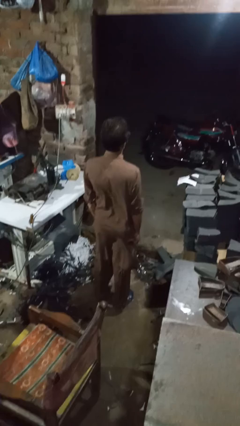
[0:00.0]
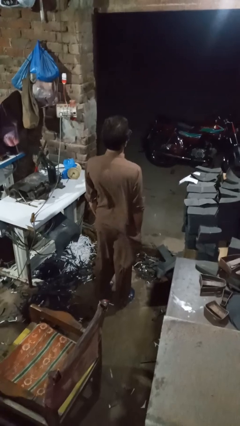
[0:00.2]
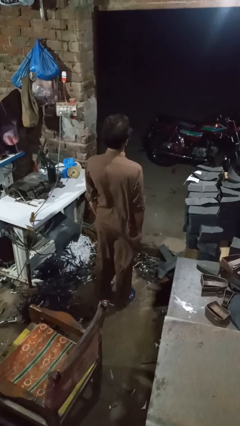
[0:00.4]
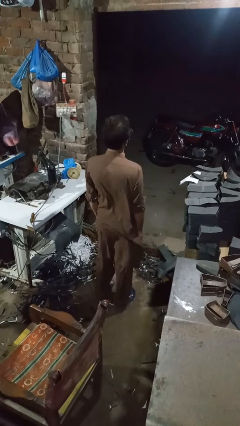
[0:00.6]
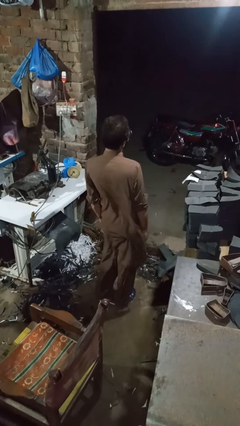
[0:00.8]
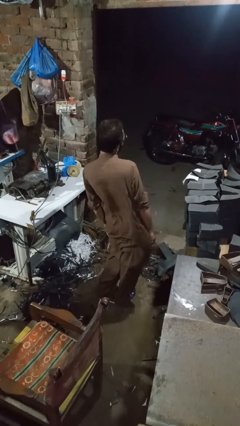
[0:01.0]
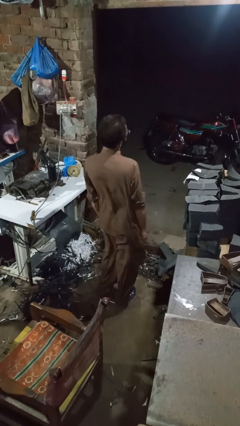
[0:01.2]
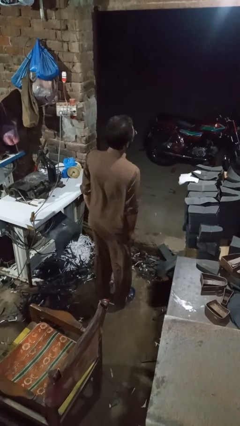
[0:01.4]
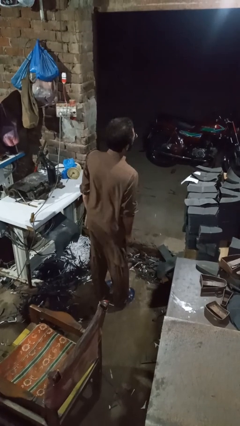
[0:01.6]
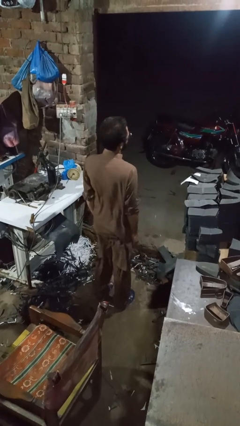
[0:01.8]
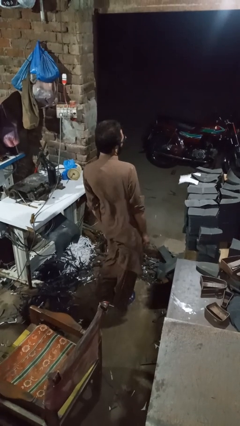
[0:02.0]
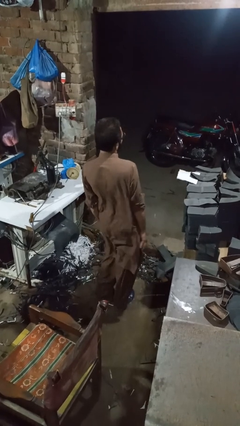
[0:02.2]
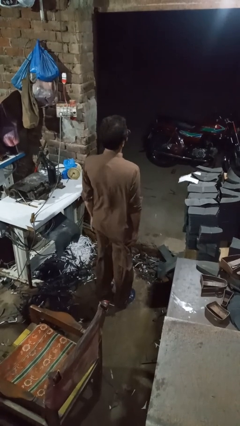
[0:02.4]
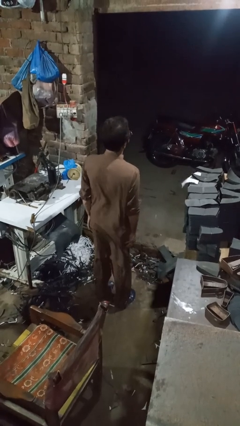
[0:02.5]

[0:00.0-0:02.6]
person wiggles hips

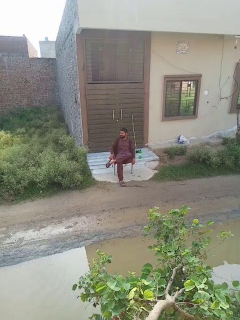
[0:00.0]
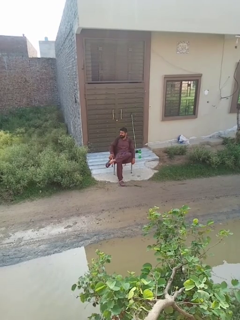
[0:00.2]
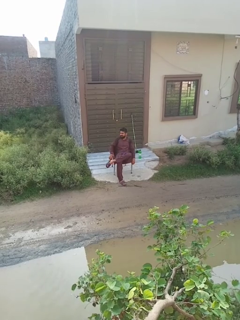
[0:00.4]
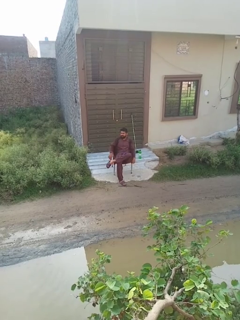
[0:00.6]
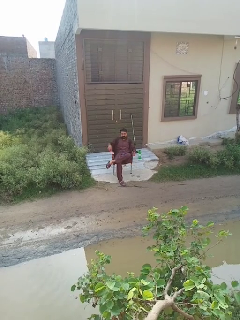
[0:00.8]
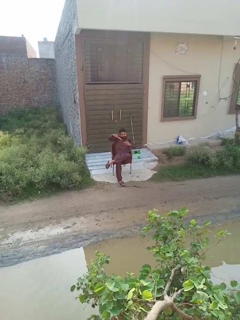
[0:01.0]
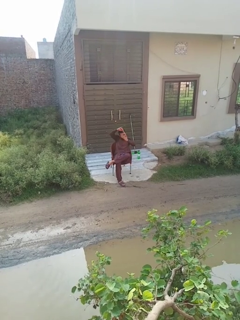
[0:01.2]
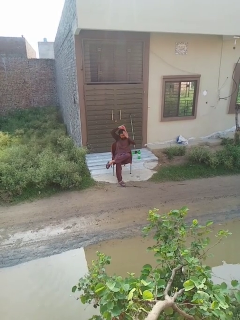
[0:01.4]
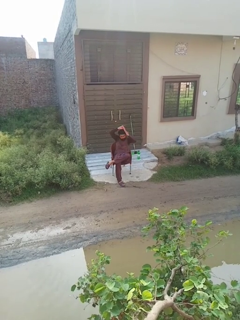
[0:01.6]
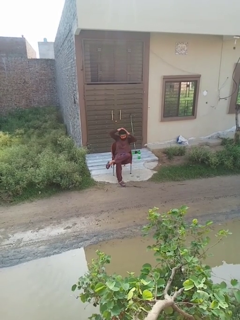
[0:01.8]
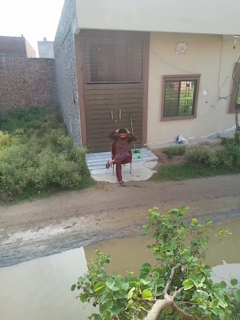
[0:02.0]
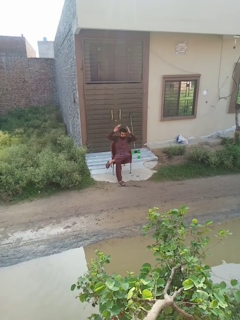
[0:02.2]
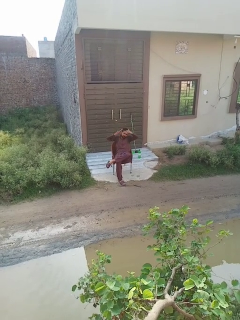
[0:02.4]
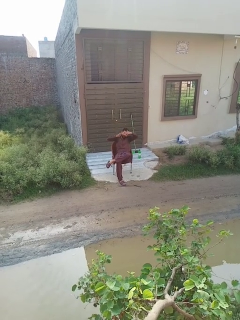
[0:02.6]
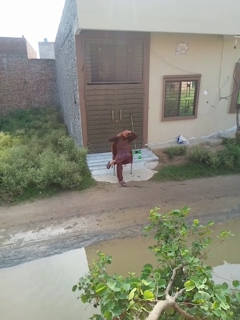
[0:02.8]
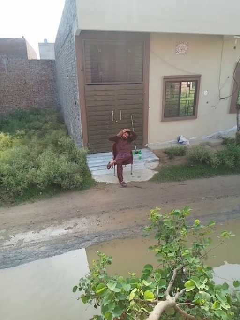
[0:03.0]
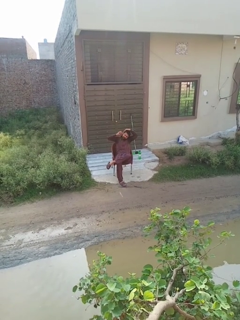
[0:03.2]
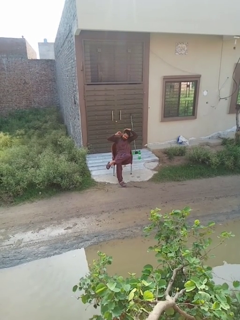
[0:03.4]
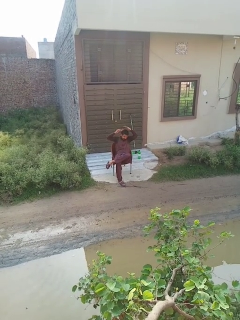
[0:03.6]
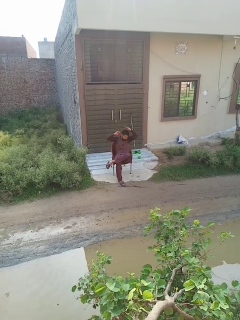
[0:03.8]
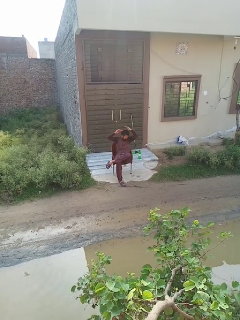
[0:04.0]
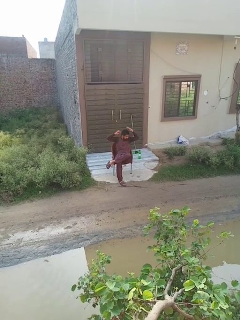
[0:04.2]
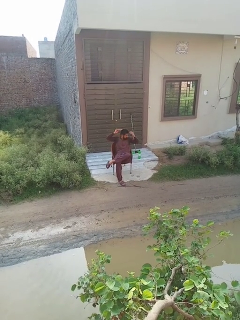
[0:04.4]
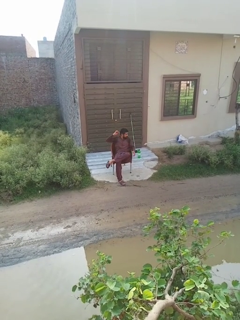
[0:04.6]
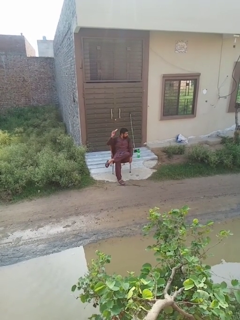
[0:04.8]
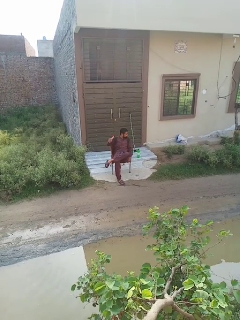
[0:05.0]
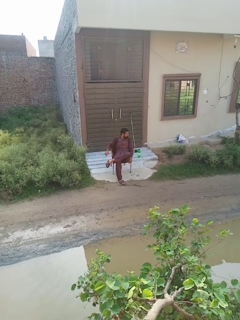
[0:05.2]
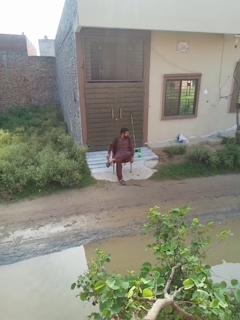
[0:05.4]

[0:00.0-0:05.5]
person brushes hair

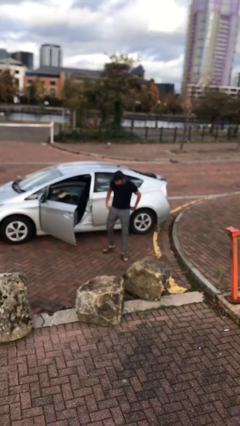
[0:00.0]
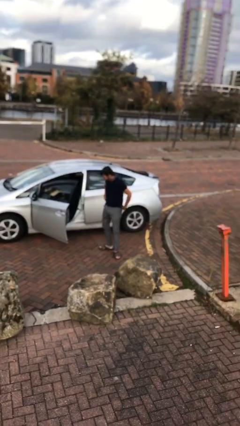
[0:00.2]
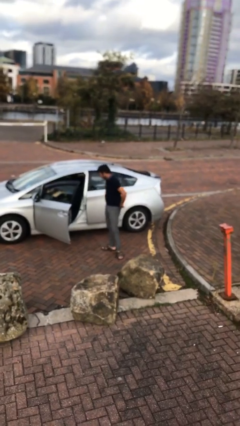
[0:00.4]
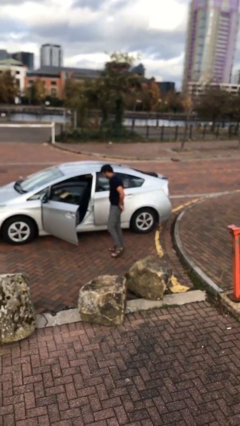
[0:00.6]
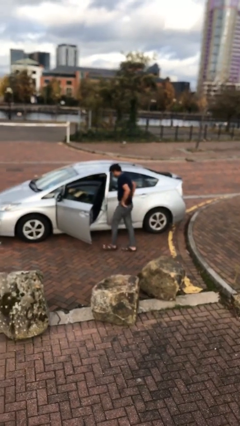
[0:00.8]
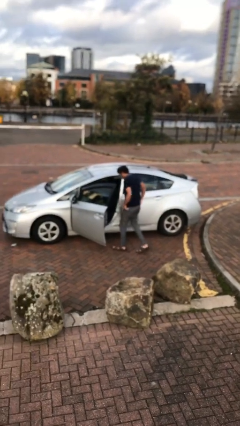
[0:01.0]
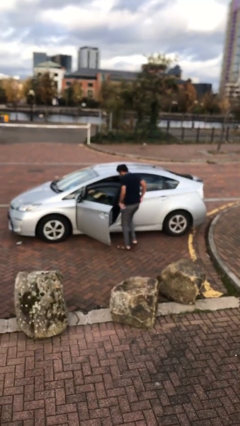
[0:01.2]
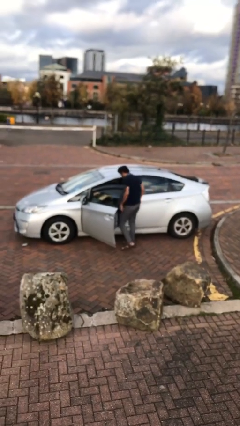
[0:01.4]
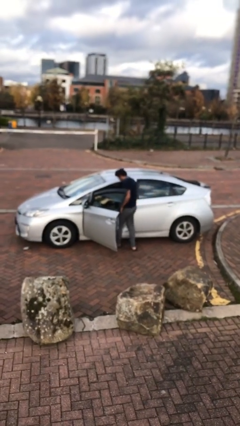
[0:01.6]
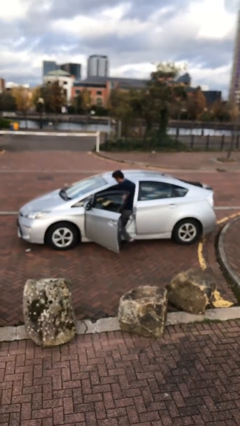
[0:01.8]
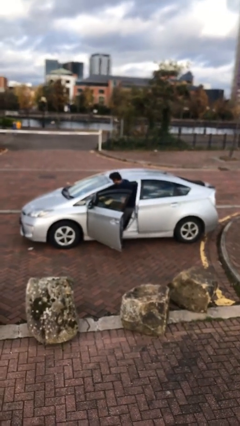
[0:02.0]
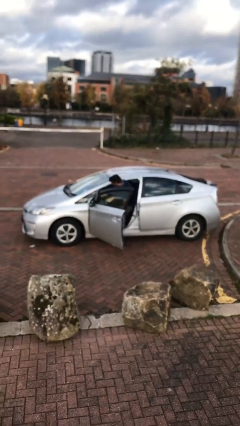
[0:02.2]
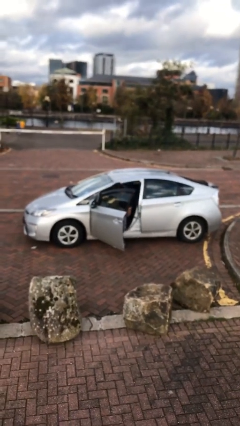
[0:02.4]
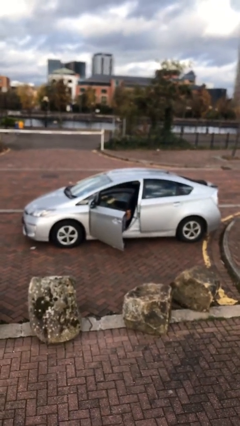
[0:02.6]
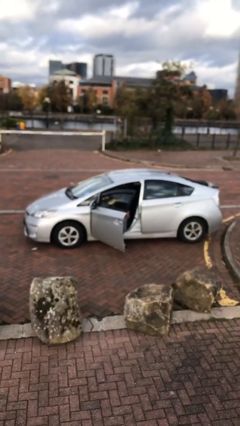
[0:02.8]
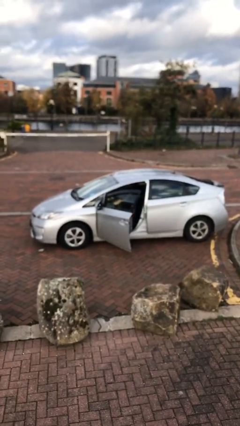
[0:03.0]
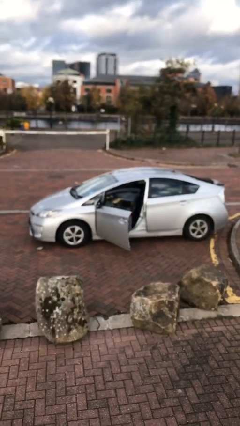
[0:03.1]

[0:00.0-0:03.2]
person enters car

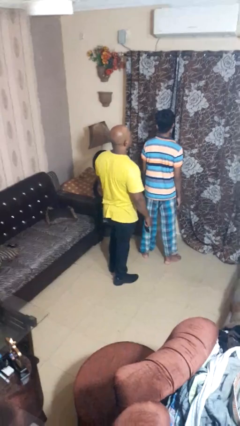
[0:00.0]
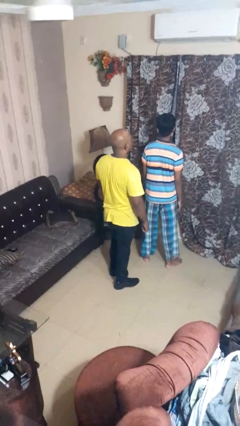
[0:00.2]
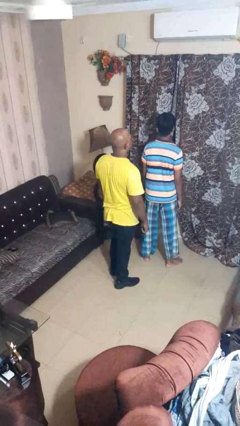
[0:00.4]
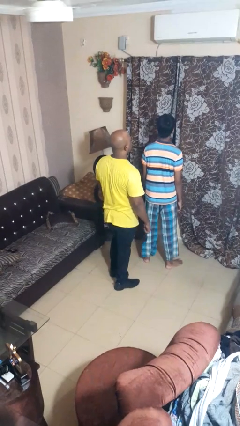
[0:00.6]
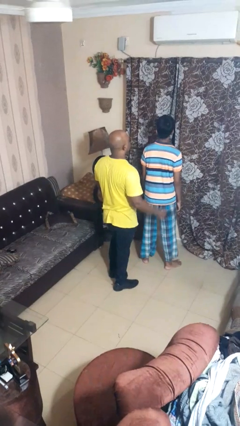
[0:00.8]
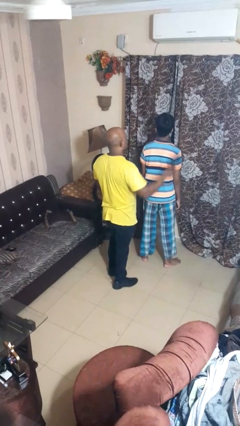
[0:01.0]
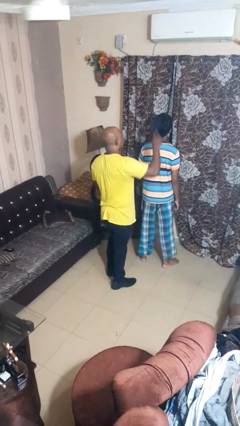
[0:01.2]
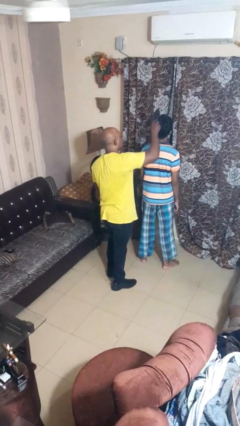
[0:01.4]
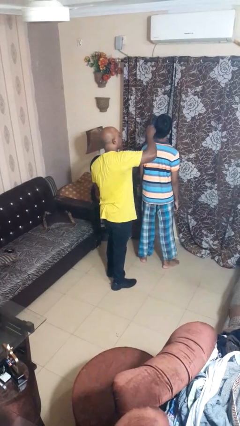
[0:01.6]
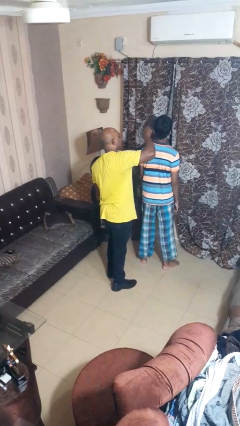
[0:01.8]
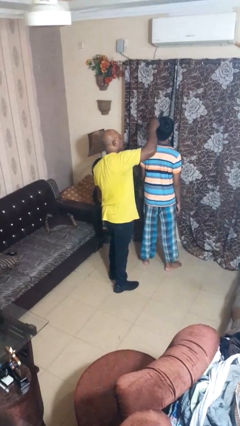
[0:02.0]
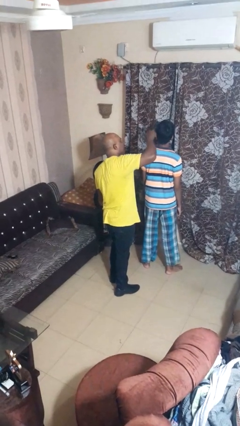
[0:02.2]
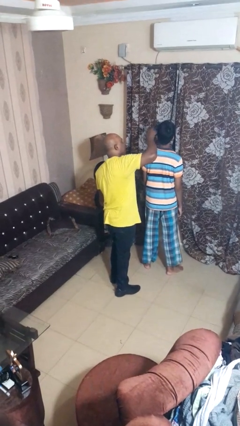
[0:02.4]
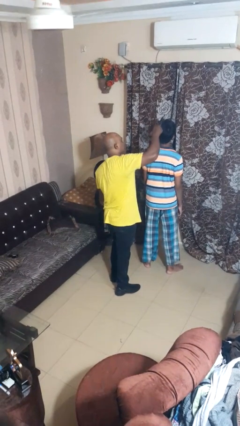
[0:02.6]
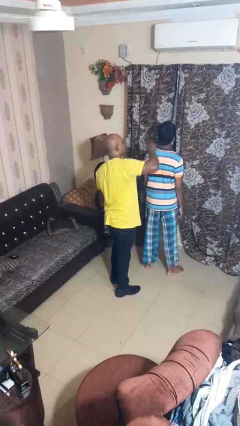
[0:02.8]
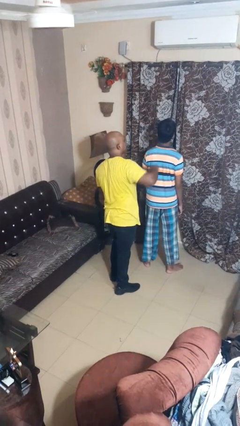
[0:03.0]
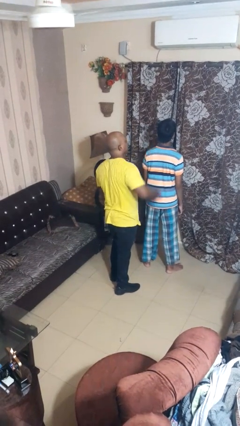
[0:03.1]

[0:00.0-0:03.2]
person brushes hair of person

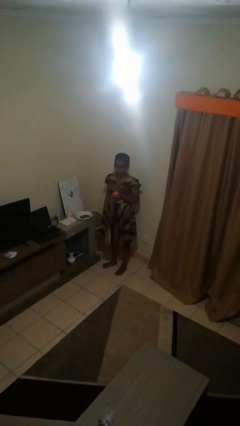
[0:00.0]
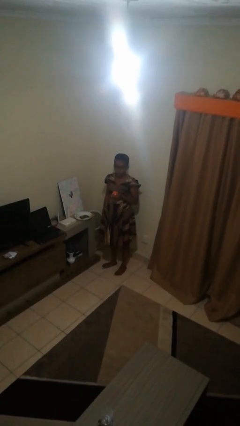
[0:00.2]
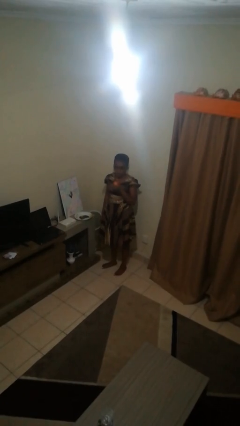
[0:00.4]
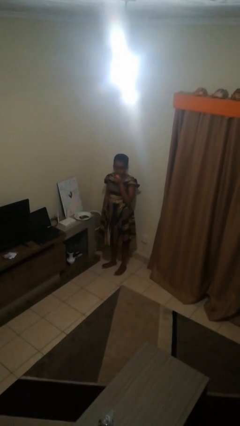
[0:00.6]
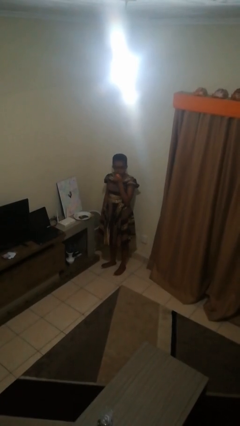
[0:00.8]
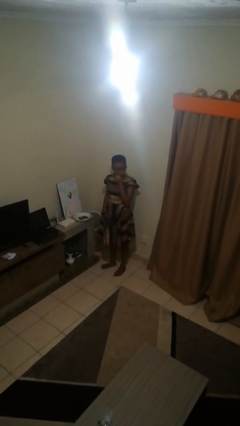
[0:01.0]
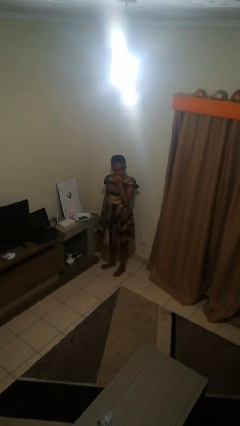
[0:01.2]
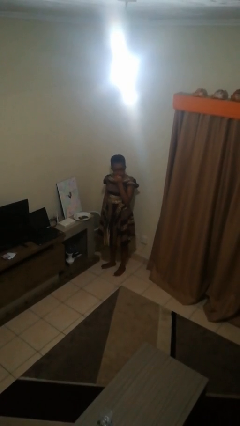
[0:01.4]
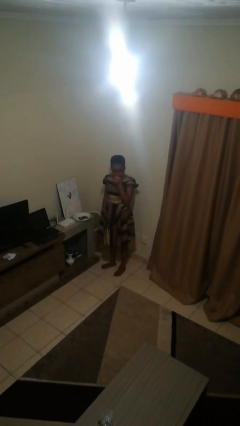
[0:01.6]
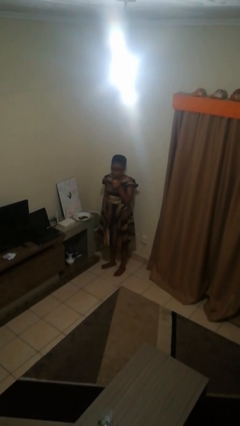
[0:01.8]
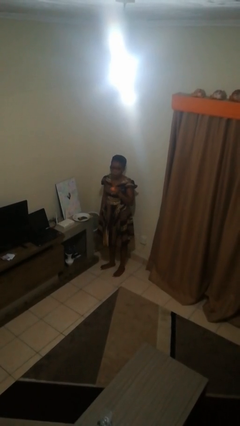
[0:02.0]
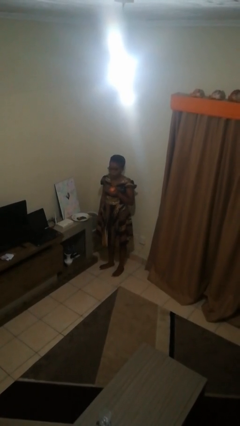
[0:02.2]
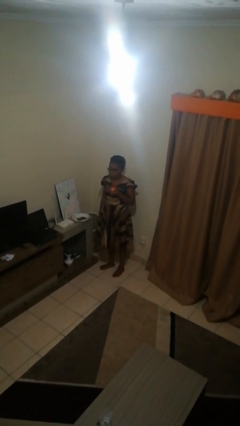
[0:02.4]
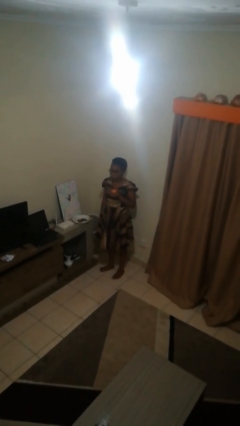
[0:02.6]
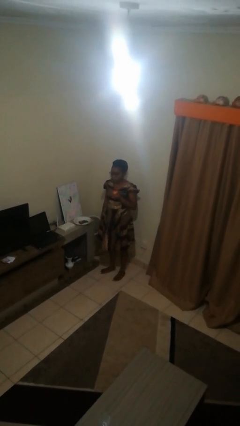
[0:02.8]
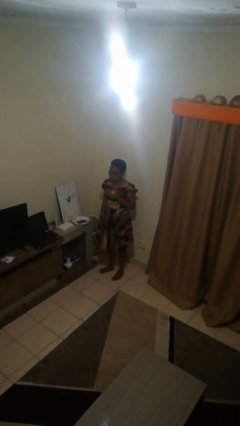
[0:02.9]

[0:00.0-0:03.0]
person eats apple

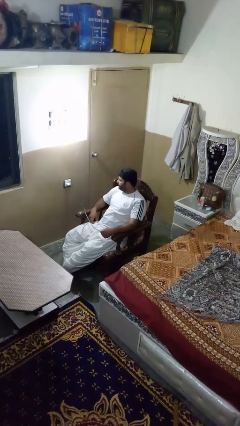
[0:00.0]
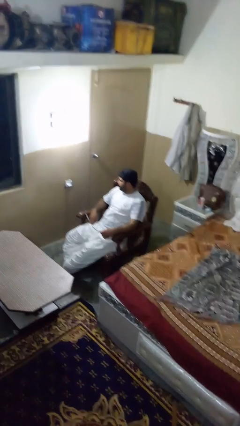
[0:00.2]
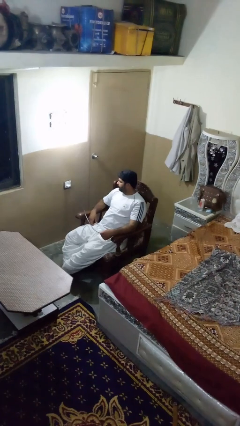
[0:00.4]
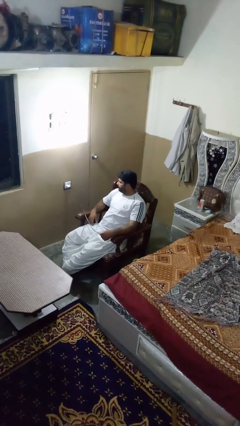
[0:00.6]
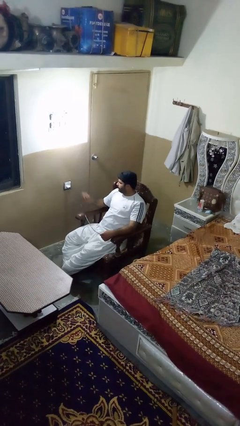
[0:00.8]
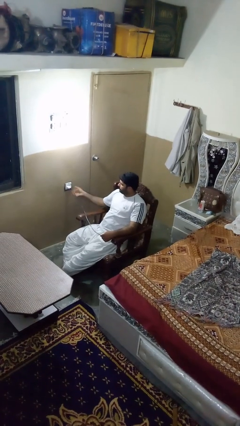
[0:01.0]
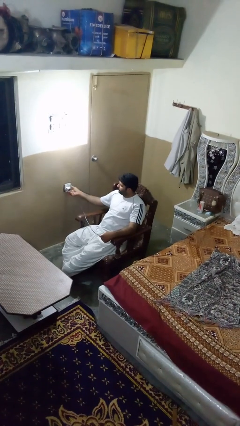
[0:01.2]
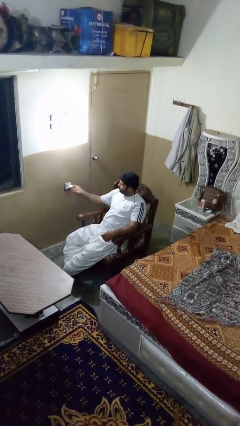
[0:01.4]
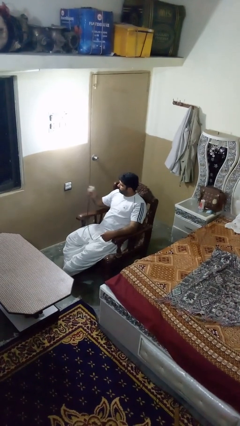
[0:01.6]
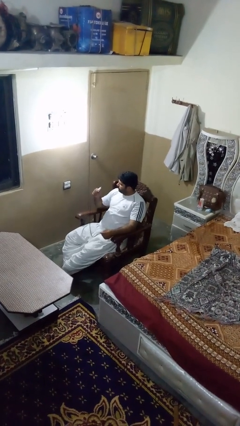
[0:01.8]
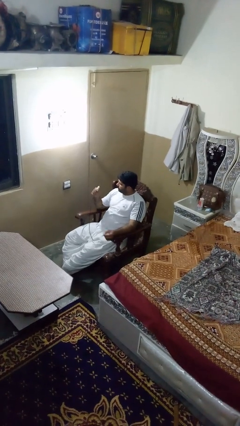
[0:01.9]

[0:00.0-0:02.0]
person unplugs from electrical socket
